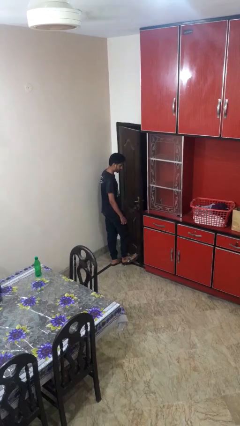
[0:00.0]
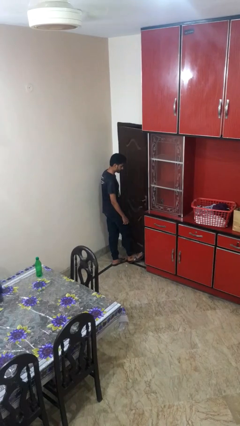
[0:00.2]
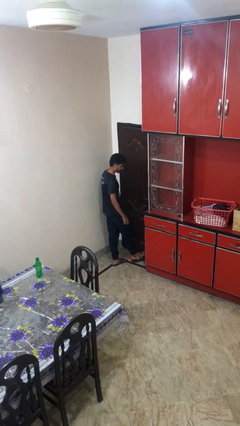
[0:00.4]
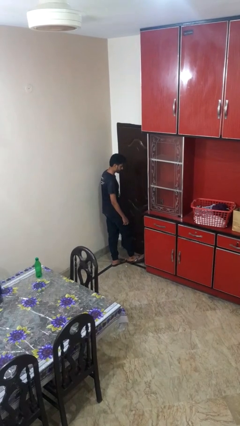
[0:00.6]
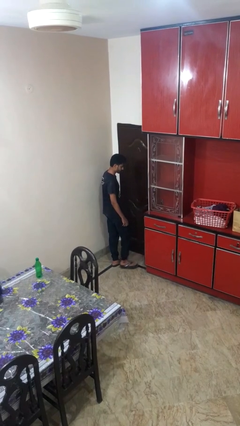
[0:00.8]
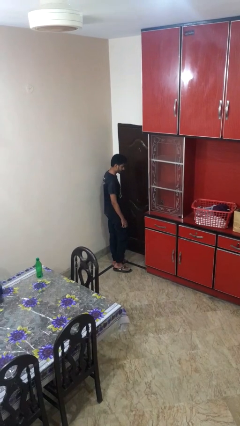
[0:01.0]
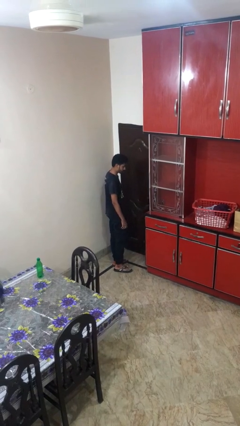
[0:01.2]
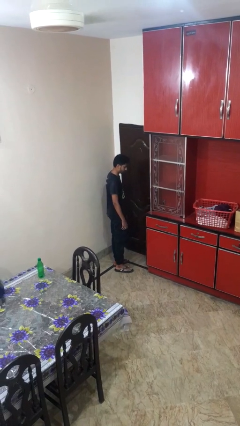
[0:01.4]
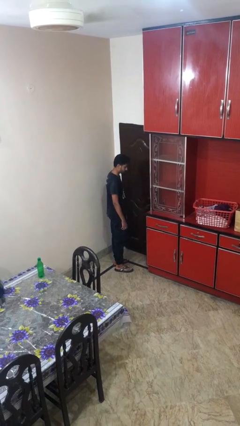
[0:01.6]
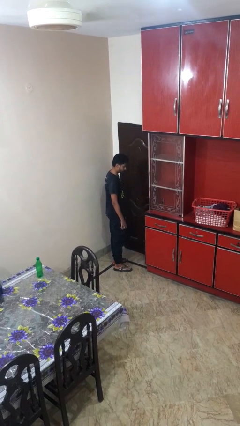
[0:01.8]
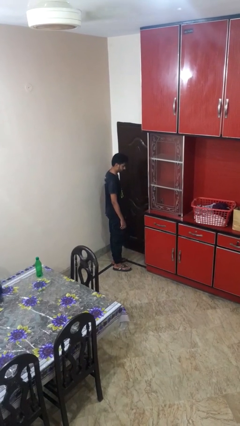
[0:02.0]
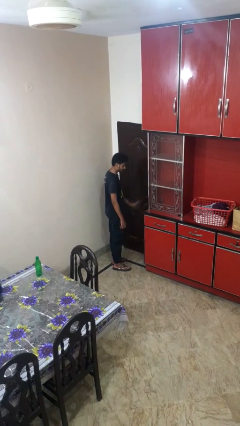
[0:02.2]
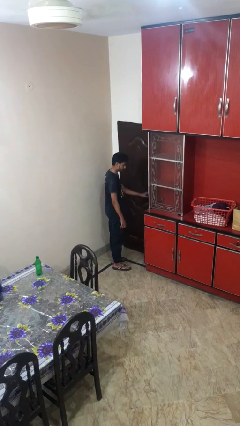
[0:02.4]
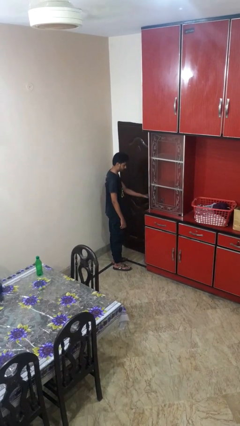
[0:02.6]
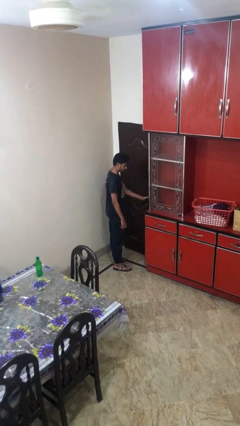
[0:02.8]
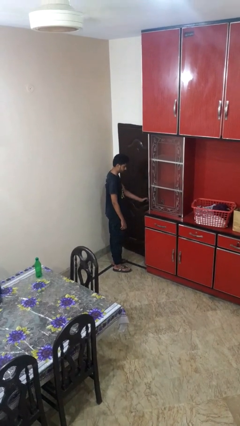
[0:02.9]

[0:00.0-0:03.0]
person closes door with foot

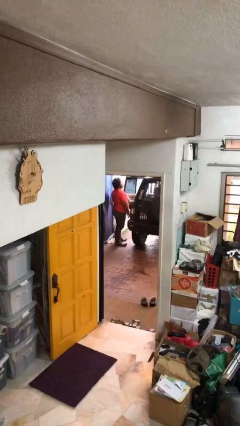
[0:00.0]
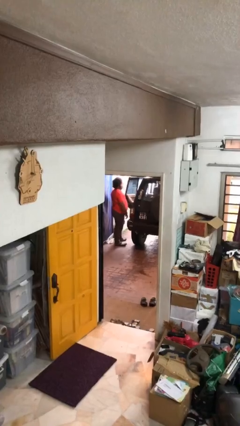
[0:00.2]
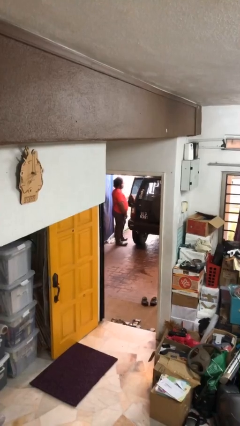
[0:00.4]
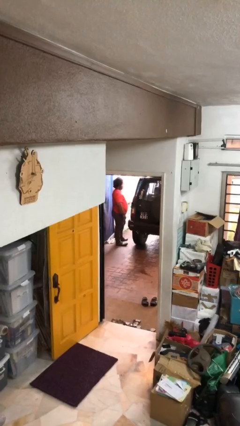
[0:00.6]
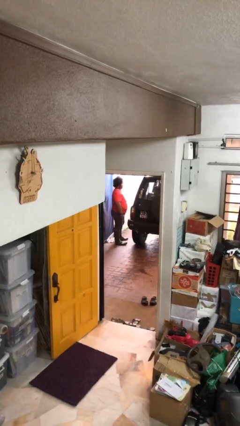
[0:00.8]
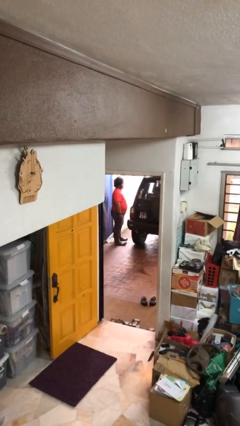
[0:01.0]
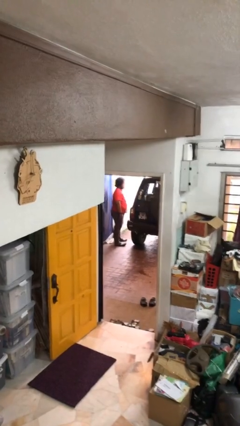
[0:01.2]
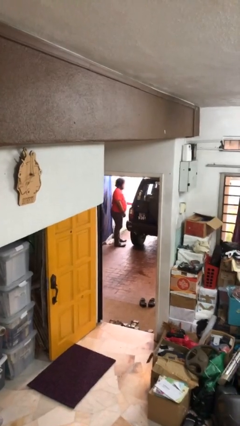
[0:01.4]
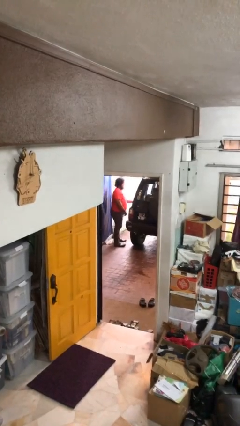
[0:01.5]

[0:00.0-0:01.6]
person closes car door

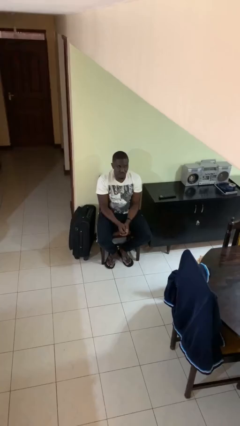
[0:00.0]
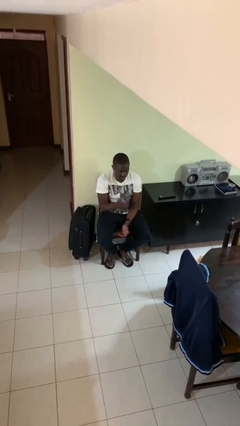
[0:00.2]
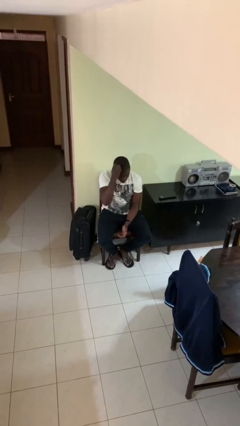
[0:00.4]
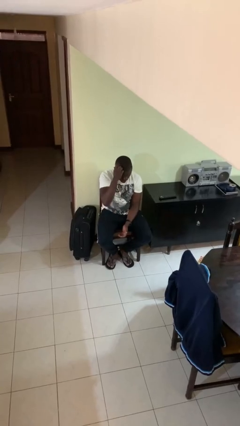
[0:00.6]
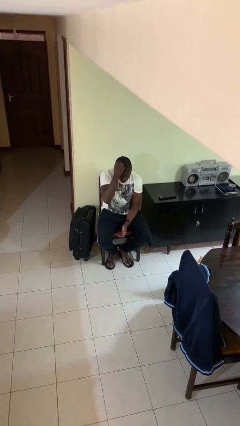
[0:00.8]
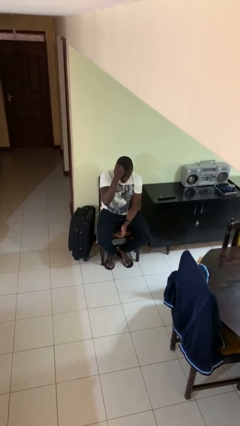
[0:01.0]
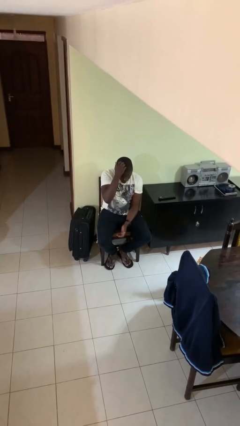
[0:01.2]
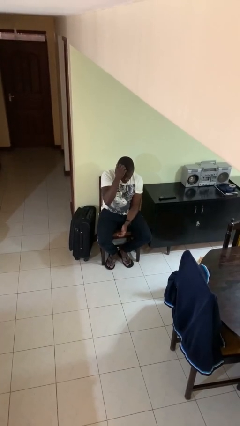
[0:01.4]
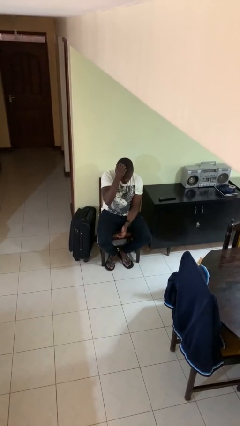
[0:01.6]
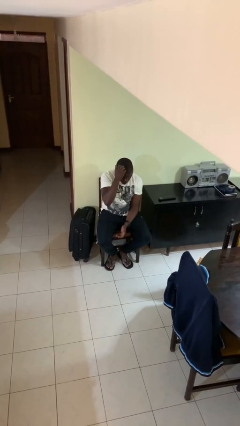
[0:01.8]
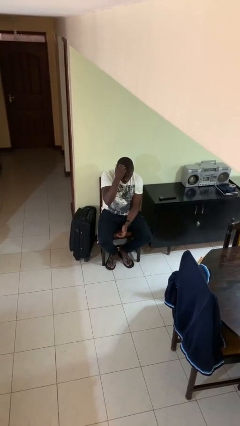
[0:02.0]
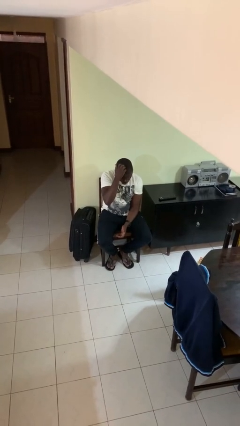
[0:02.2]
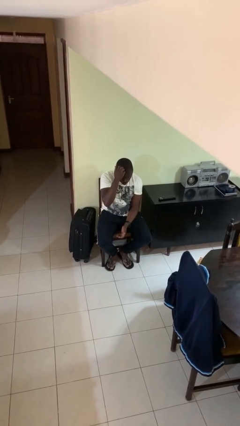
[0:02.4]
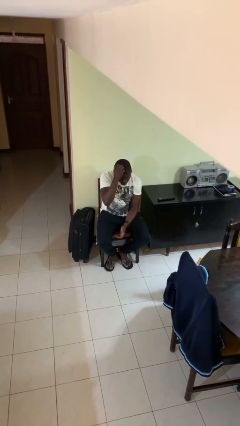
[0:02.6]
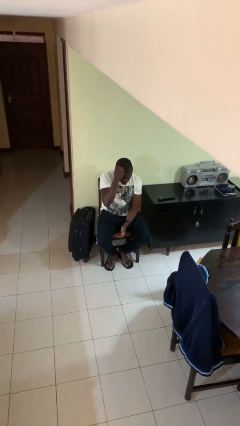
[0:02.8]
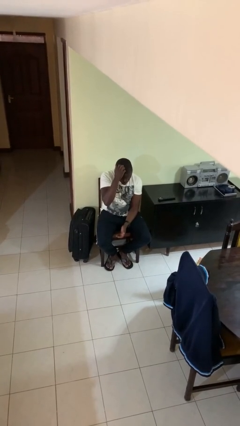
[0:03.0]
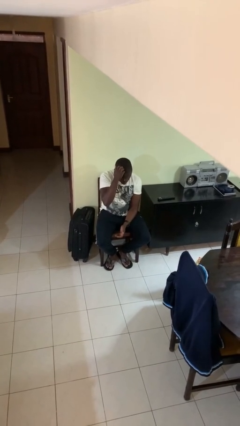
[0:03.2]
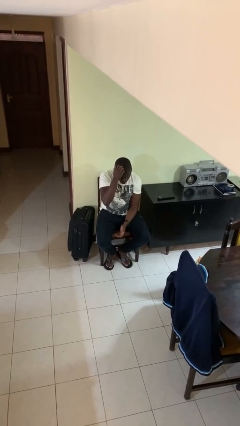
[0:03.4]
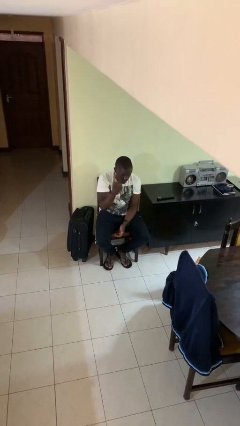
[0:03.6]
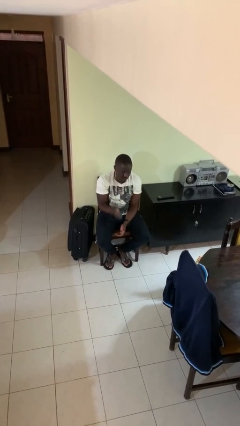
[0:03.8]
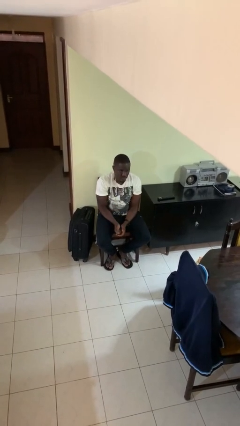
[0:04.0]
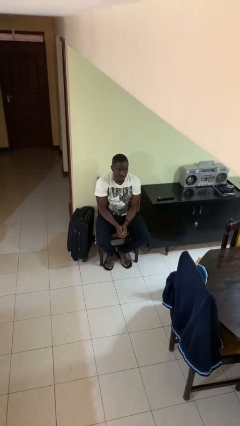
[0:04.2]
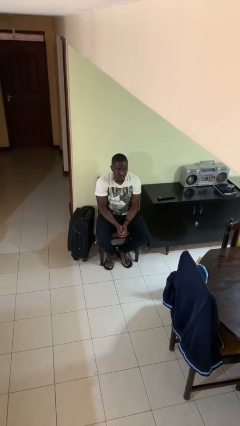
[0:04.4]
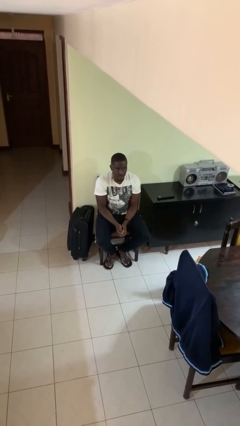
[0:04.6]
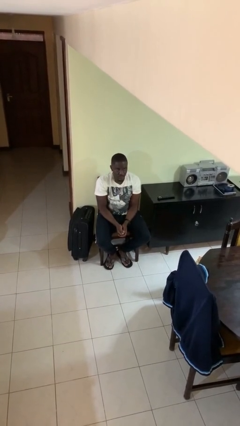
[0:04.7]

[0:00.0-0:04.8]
person scratches face

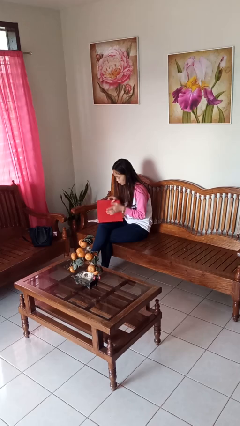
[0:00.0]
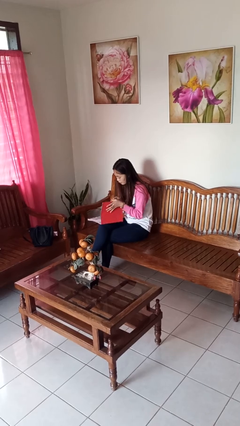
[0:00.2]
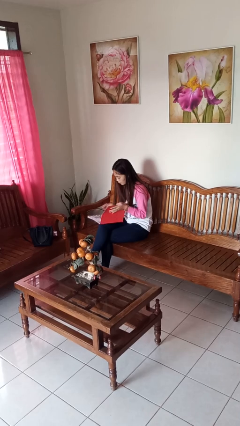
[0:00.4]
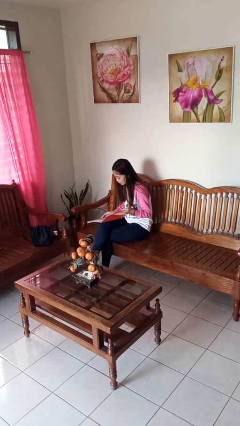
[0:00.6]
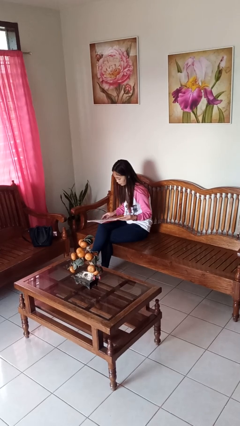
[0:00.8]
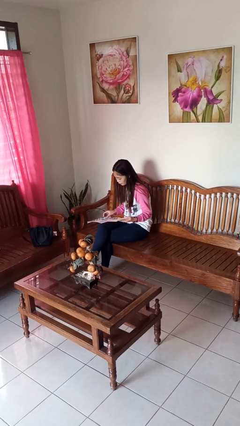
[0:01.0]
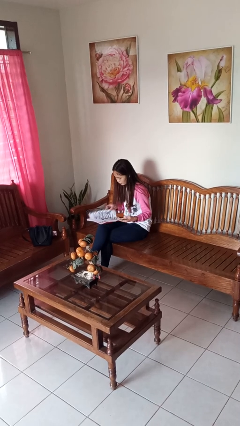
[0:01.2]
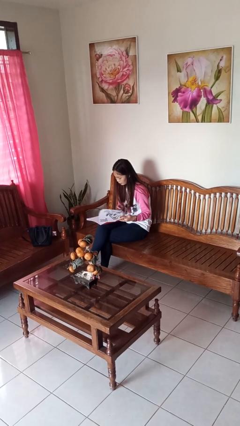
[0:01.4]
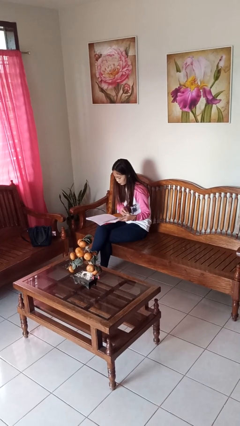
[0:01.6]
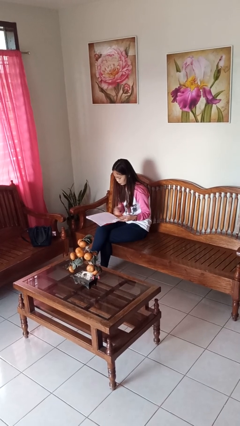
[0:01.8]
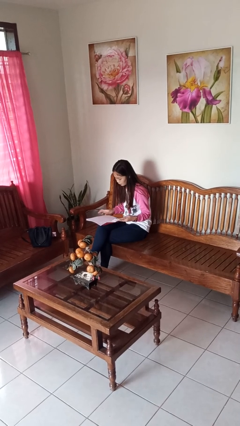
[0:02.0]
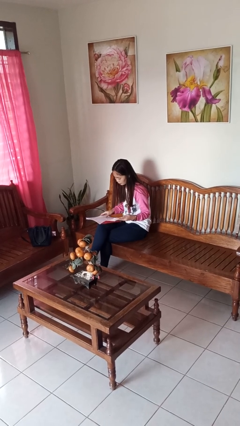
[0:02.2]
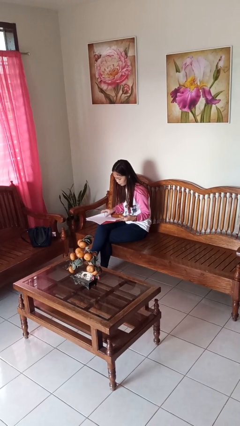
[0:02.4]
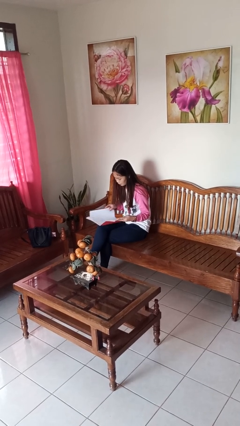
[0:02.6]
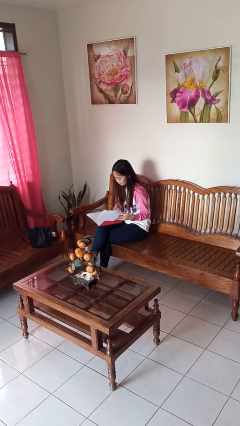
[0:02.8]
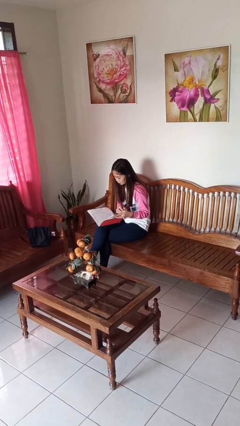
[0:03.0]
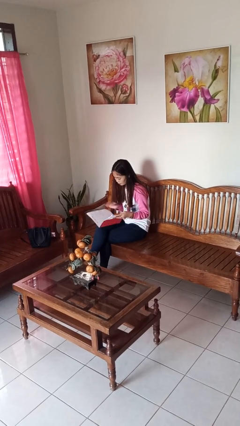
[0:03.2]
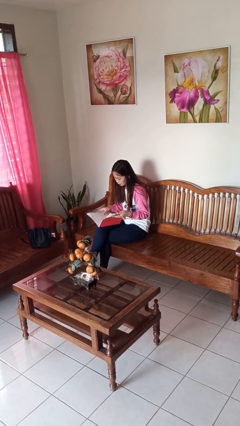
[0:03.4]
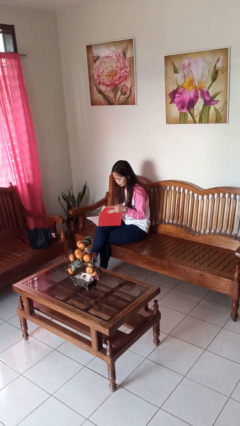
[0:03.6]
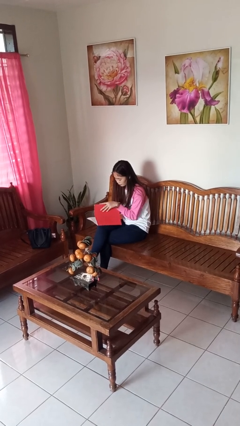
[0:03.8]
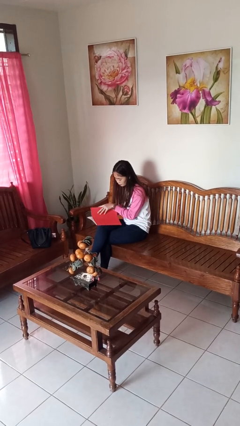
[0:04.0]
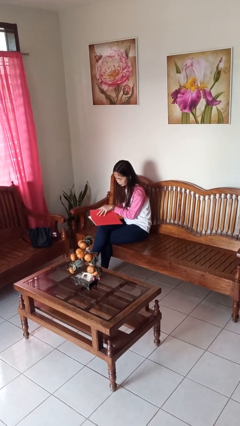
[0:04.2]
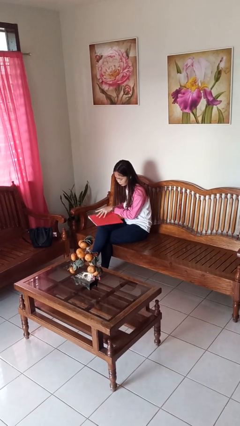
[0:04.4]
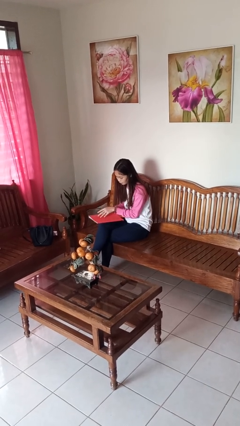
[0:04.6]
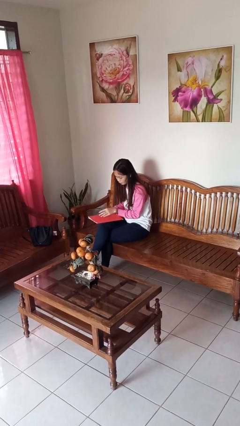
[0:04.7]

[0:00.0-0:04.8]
person reads magazine

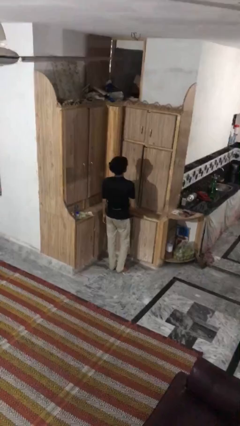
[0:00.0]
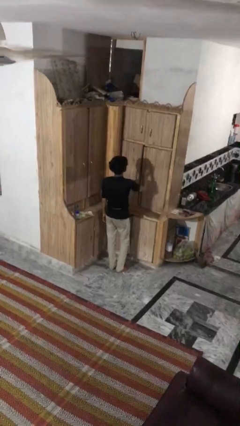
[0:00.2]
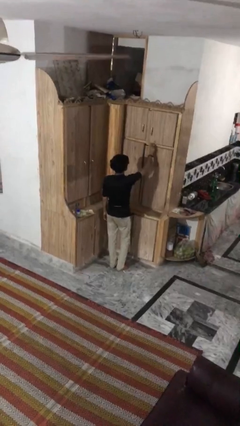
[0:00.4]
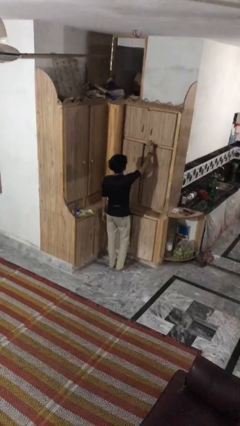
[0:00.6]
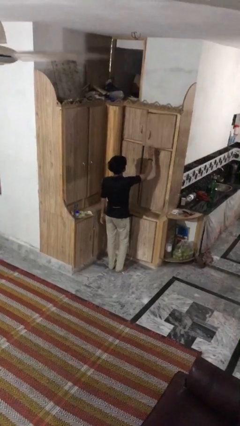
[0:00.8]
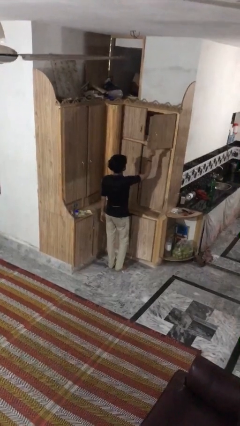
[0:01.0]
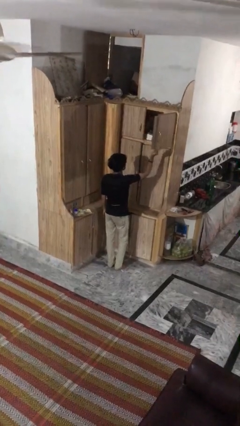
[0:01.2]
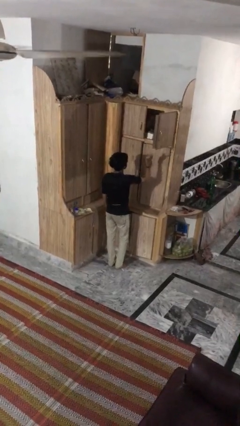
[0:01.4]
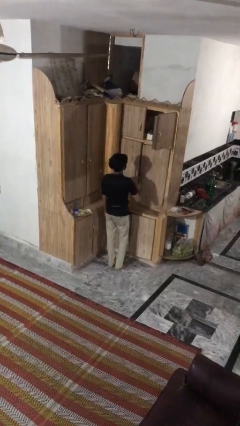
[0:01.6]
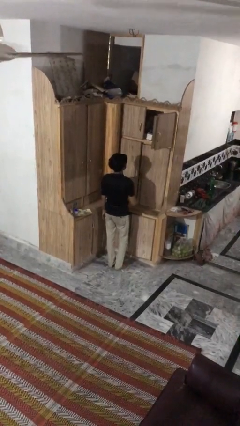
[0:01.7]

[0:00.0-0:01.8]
person opens cabinet

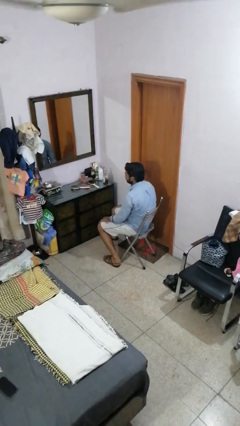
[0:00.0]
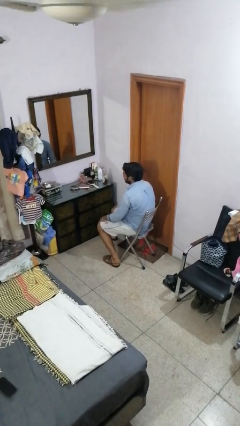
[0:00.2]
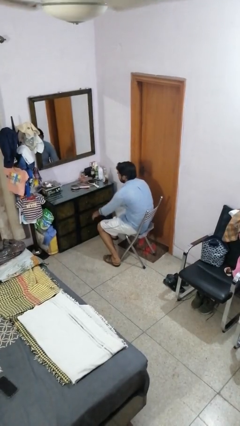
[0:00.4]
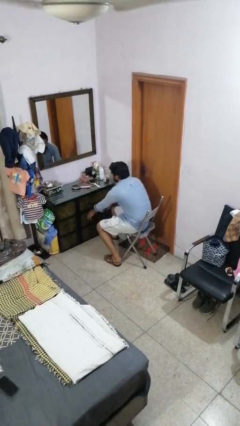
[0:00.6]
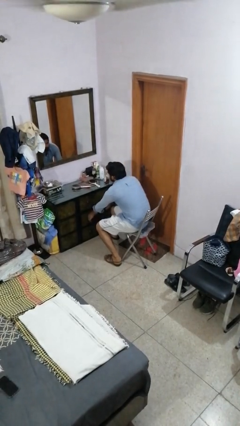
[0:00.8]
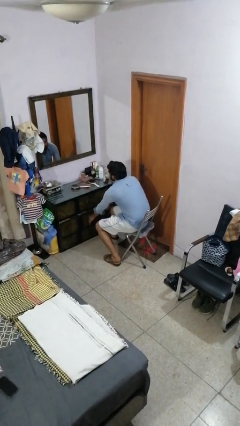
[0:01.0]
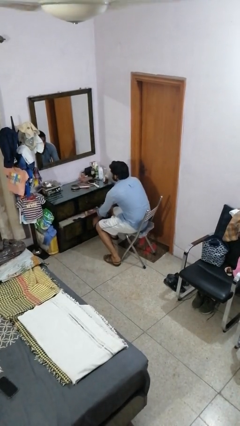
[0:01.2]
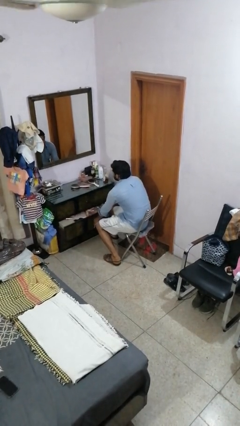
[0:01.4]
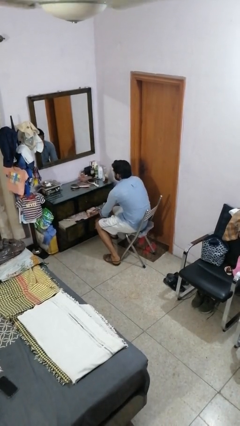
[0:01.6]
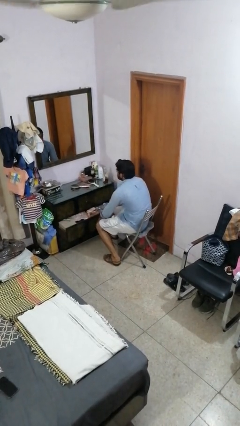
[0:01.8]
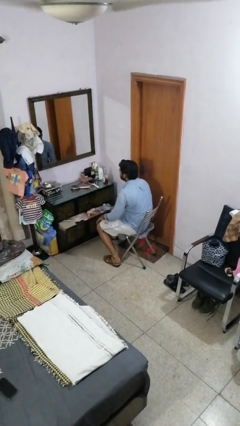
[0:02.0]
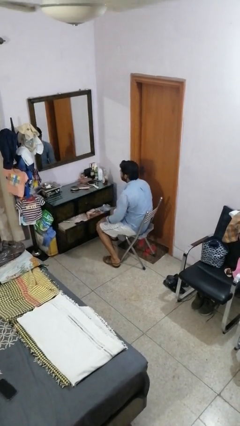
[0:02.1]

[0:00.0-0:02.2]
person opens dresser drawer
